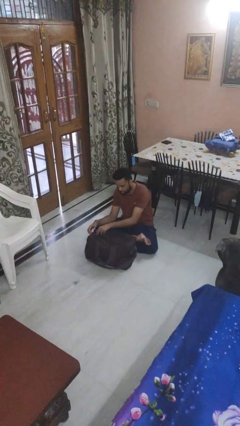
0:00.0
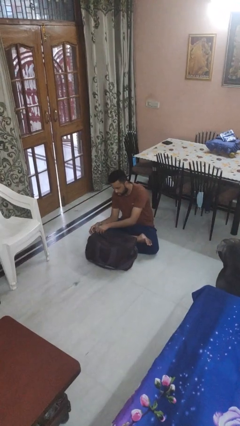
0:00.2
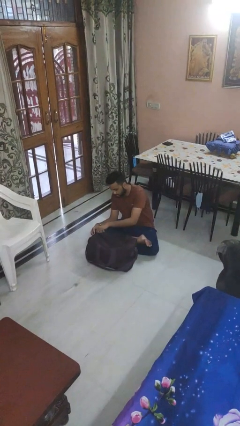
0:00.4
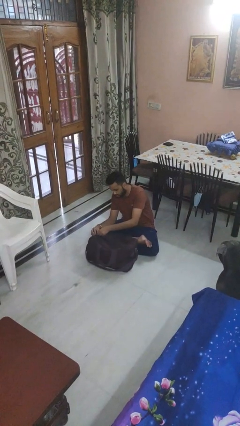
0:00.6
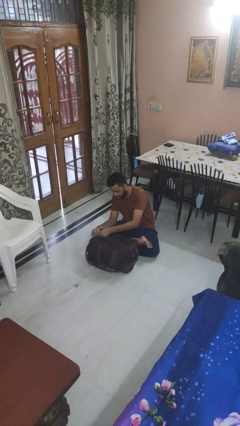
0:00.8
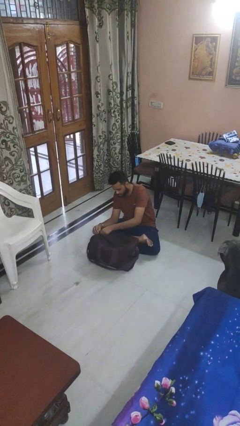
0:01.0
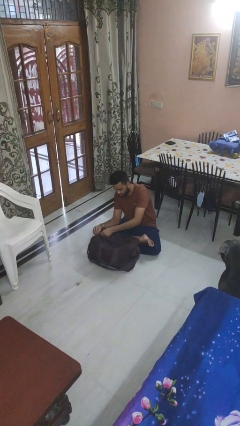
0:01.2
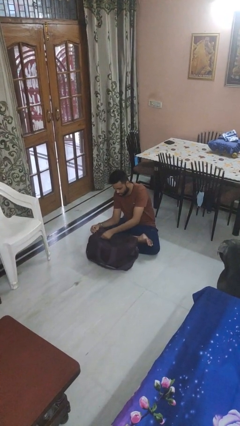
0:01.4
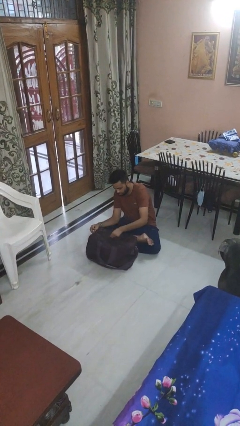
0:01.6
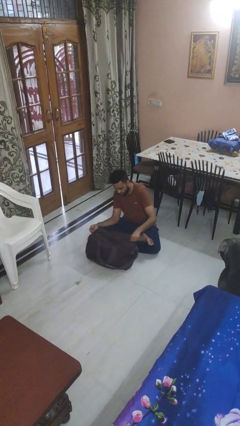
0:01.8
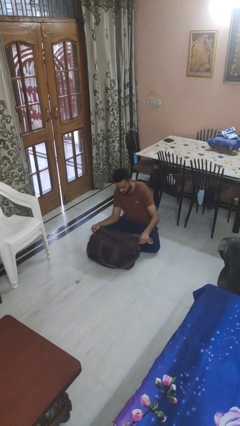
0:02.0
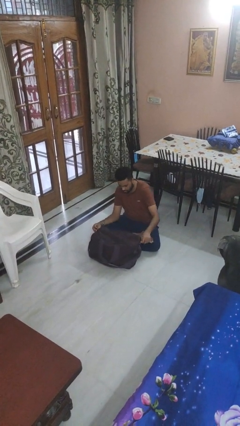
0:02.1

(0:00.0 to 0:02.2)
person closes suitcase

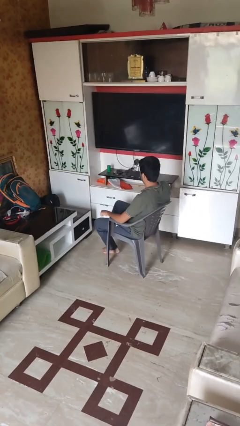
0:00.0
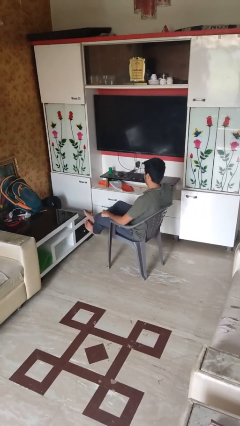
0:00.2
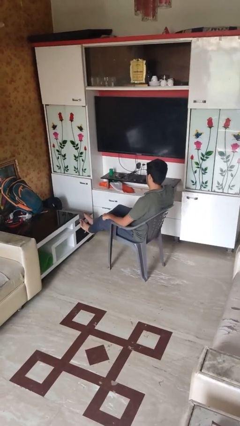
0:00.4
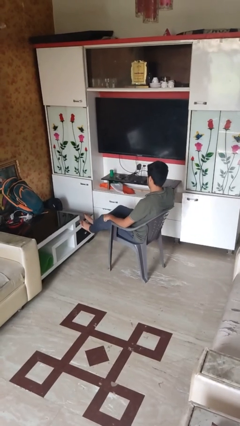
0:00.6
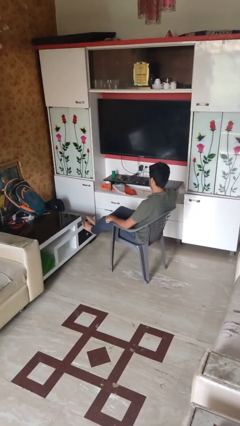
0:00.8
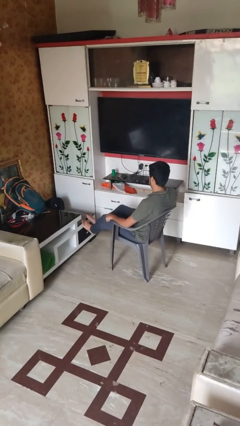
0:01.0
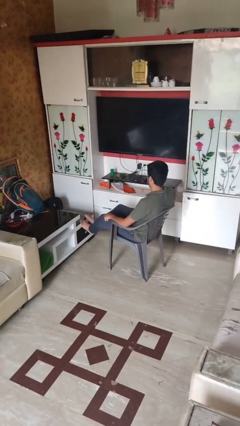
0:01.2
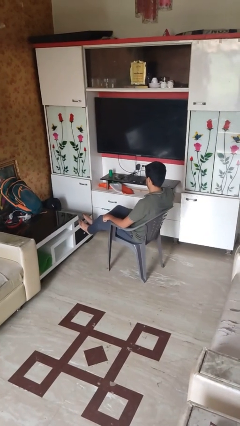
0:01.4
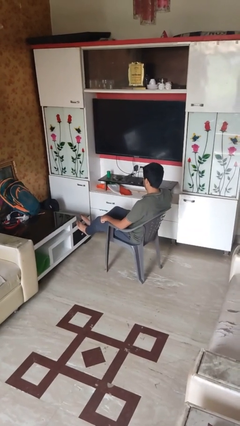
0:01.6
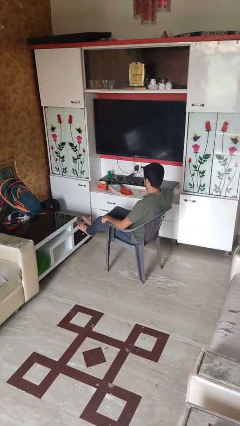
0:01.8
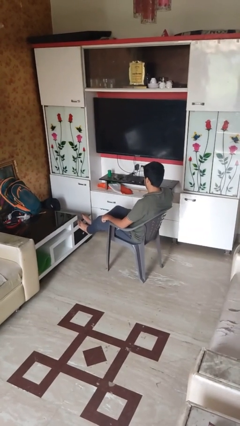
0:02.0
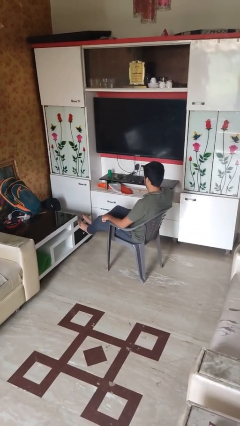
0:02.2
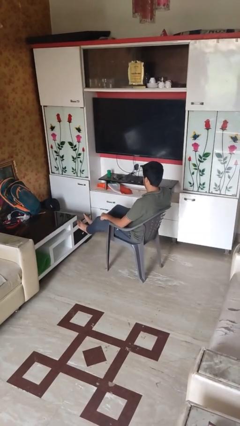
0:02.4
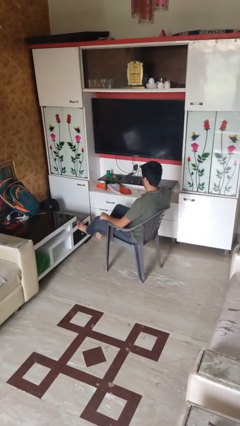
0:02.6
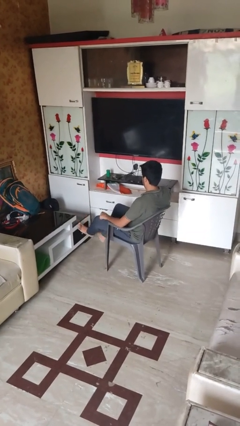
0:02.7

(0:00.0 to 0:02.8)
person puts feet up

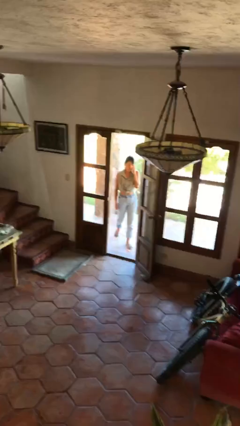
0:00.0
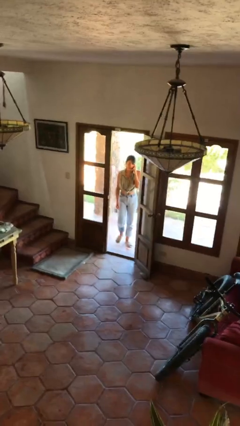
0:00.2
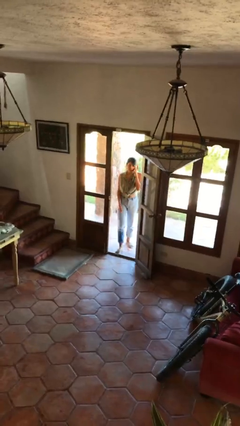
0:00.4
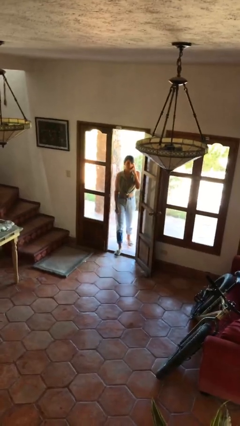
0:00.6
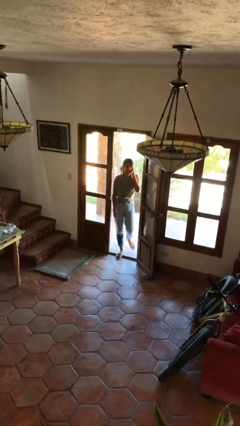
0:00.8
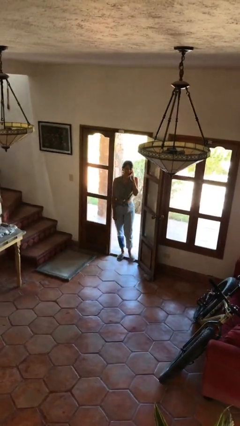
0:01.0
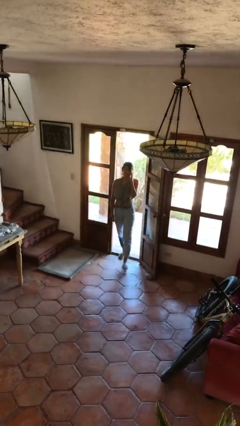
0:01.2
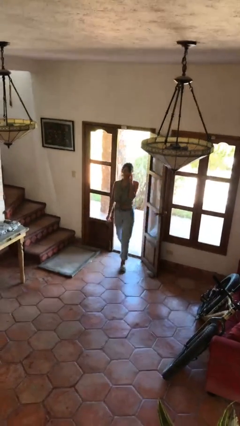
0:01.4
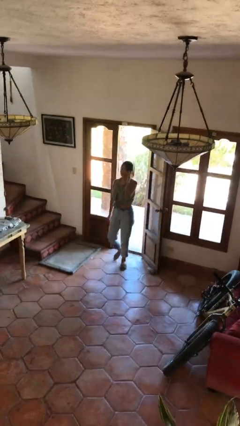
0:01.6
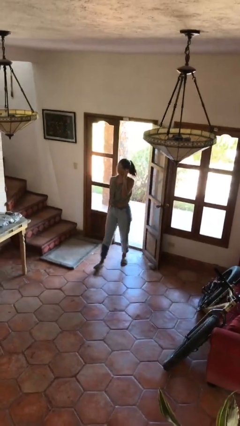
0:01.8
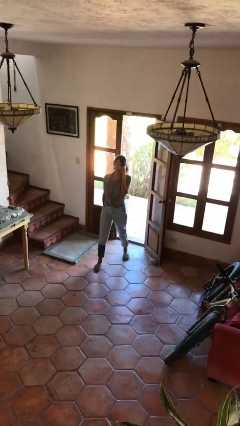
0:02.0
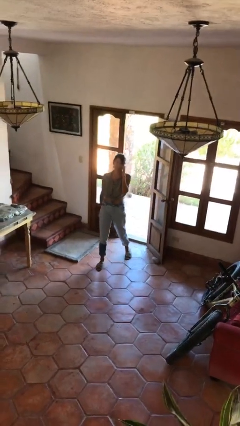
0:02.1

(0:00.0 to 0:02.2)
person enters scene through structure

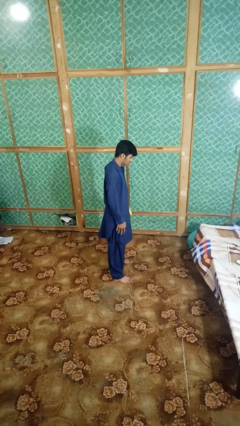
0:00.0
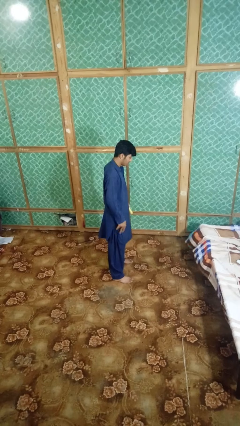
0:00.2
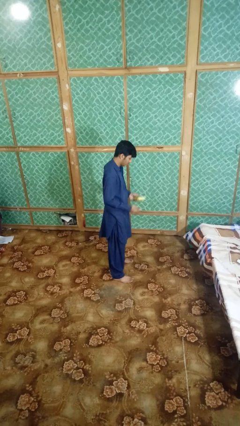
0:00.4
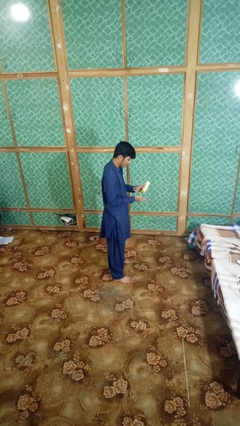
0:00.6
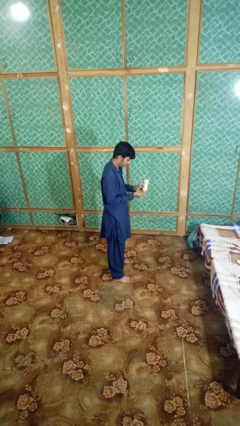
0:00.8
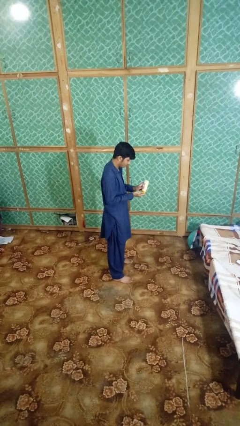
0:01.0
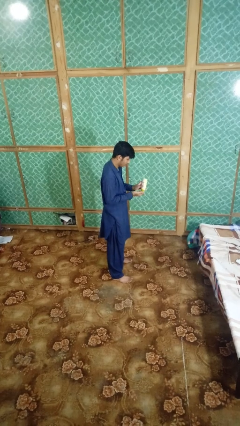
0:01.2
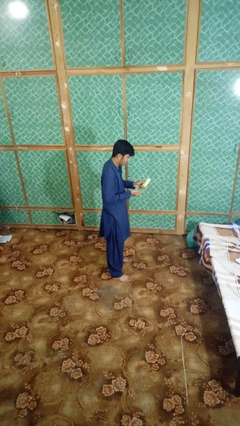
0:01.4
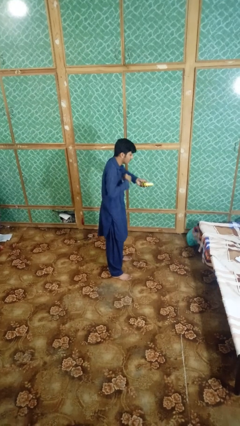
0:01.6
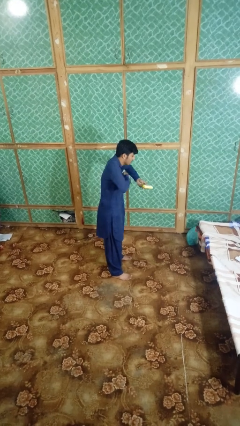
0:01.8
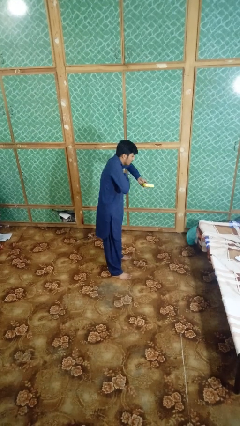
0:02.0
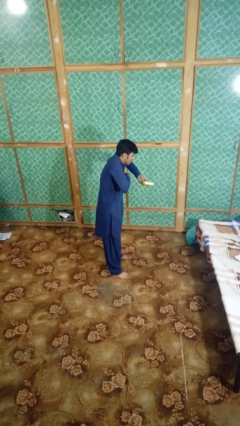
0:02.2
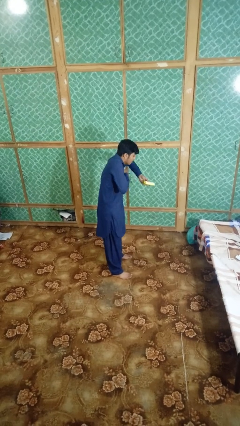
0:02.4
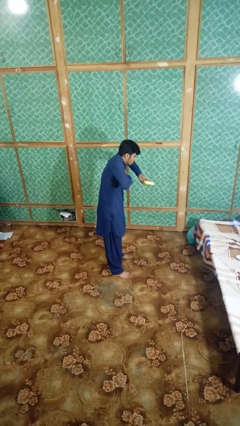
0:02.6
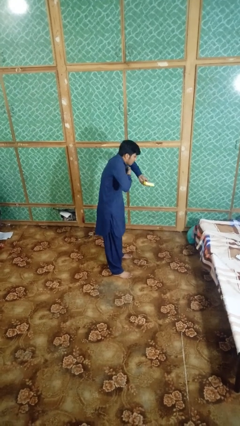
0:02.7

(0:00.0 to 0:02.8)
person applies deodorant

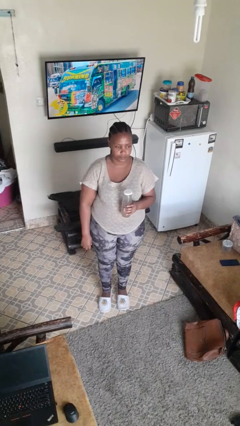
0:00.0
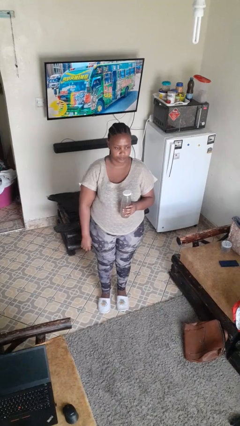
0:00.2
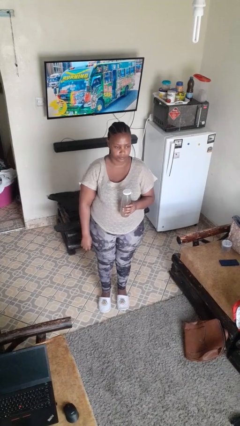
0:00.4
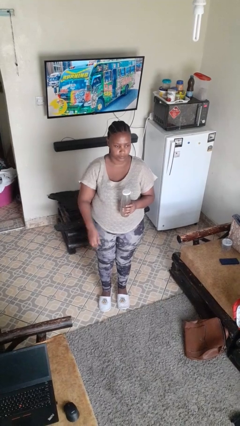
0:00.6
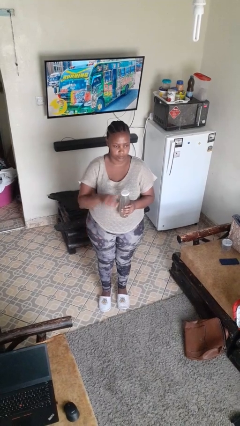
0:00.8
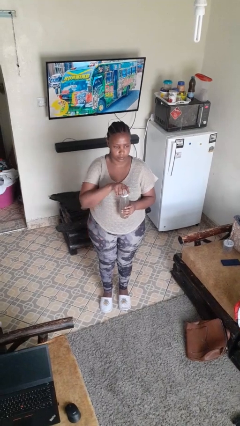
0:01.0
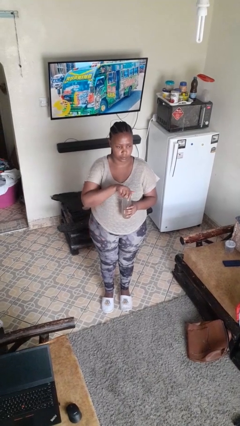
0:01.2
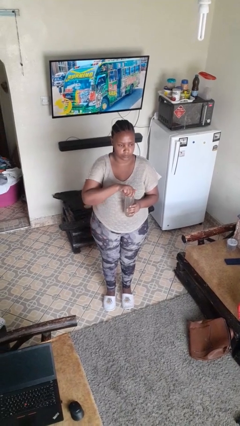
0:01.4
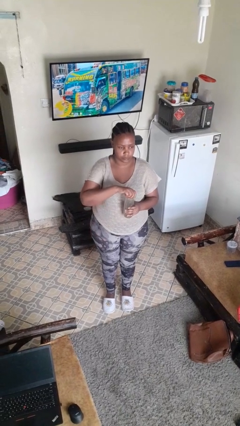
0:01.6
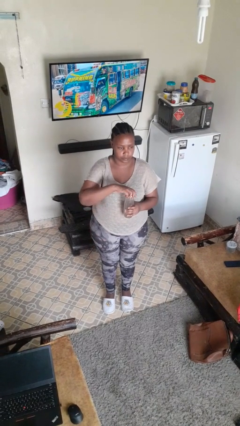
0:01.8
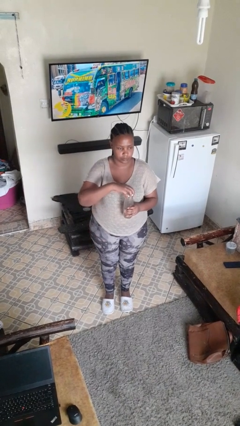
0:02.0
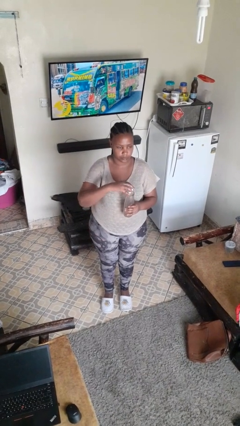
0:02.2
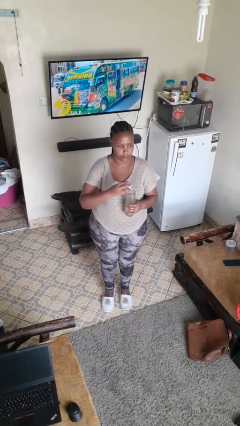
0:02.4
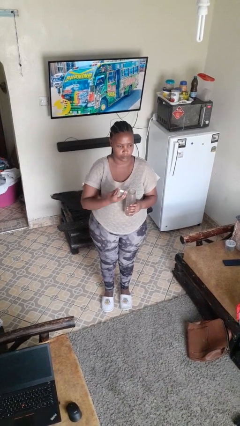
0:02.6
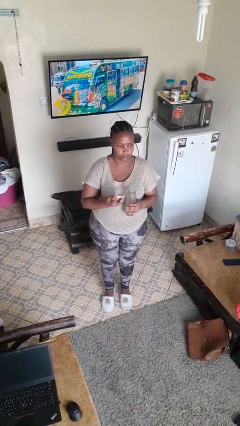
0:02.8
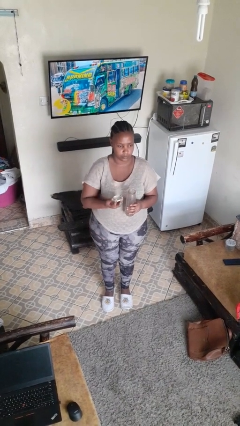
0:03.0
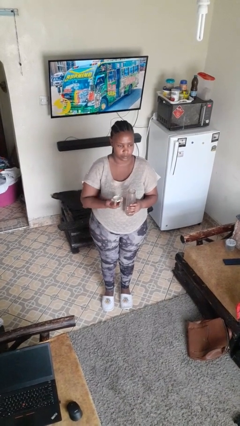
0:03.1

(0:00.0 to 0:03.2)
person unscrews lid from bottle

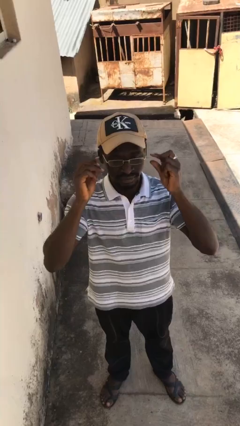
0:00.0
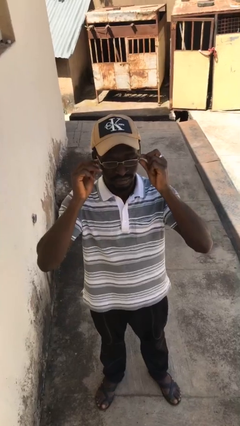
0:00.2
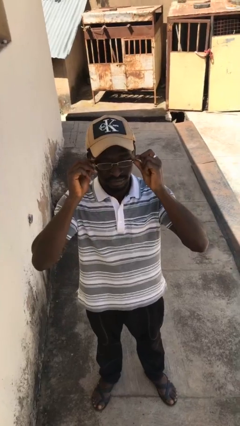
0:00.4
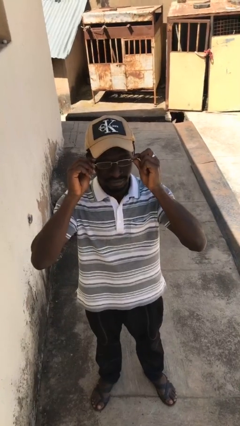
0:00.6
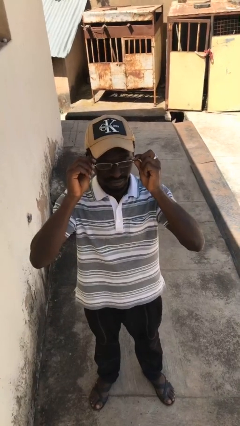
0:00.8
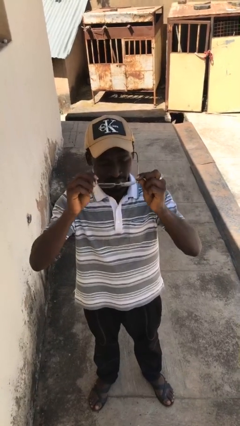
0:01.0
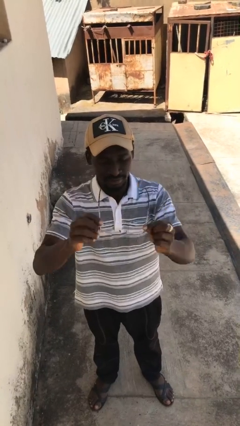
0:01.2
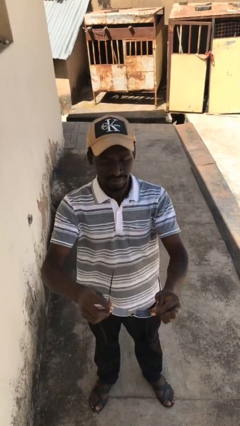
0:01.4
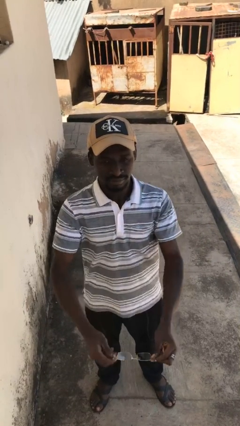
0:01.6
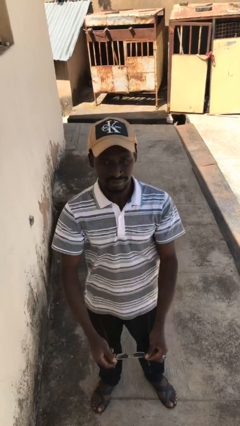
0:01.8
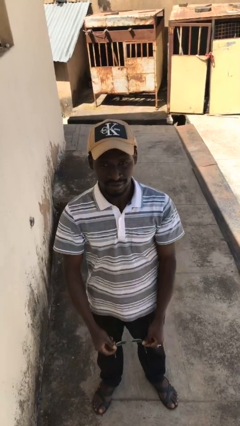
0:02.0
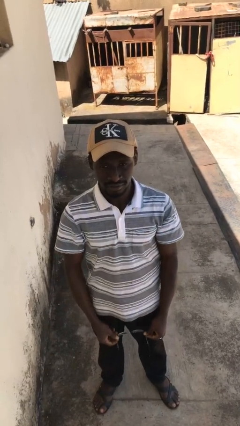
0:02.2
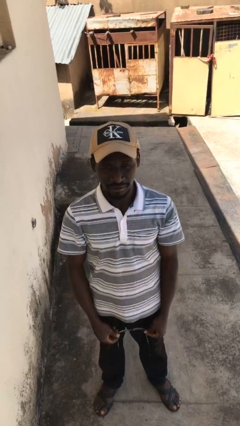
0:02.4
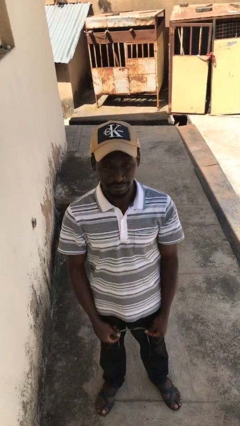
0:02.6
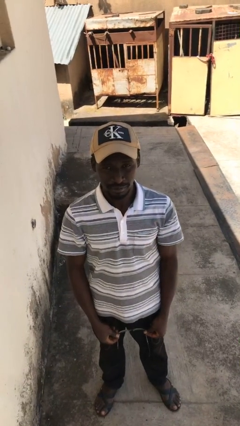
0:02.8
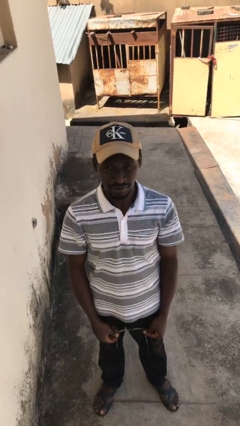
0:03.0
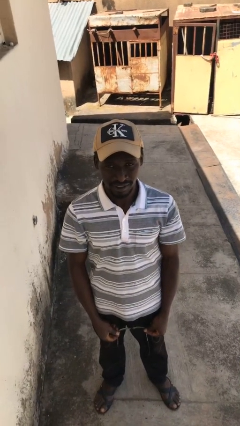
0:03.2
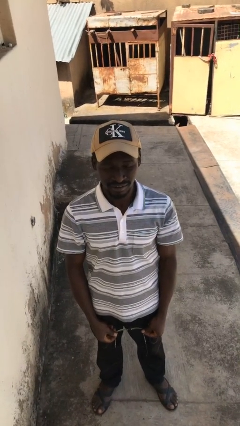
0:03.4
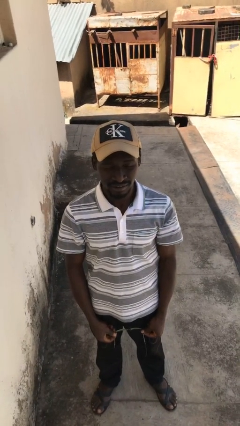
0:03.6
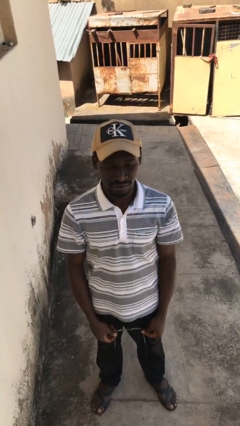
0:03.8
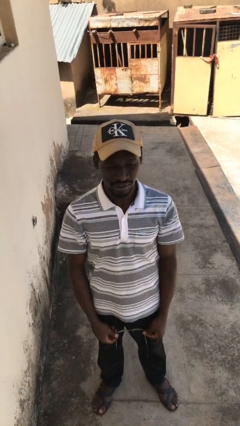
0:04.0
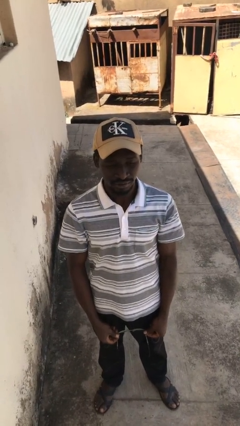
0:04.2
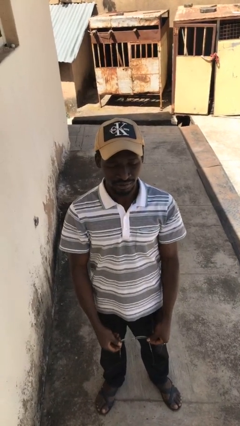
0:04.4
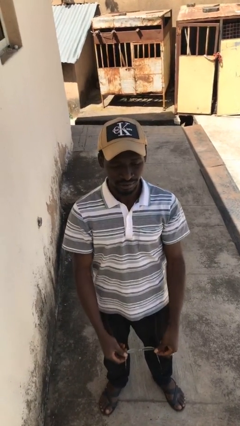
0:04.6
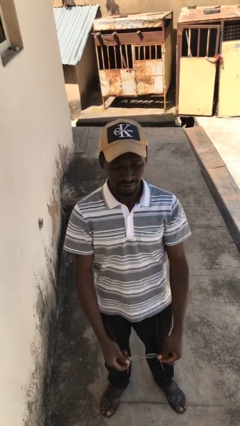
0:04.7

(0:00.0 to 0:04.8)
person takes off glasses
